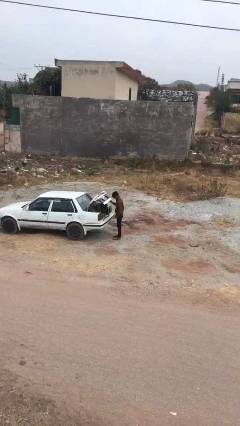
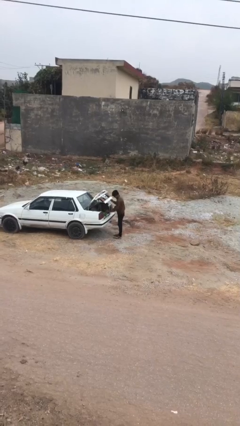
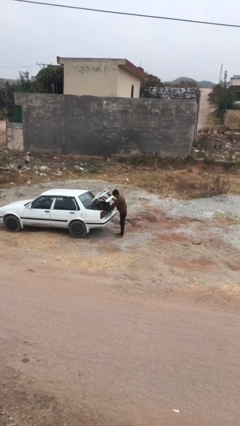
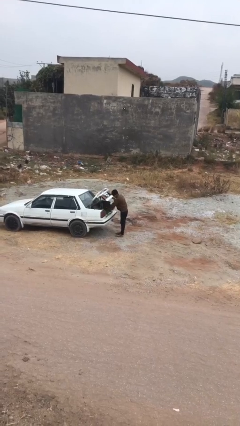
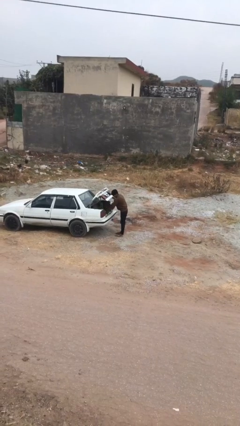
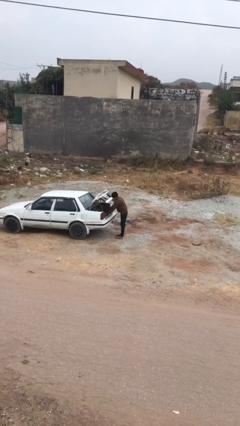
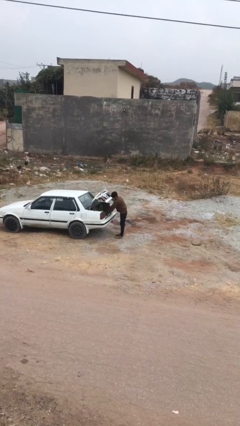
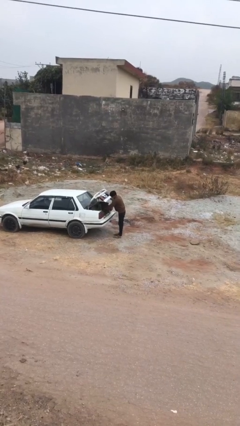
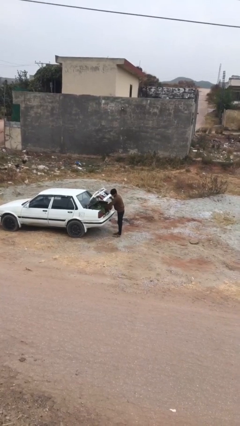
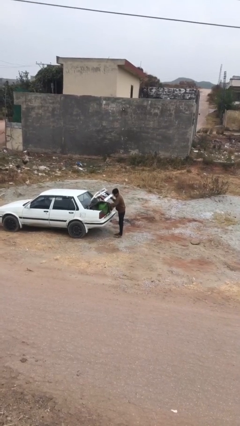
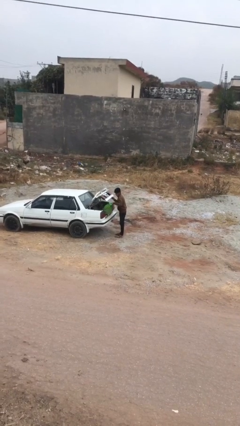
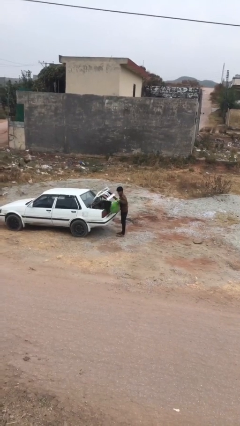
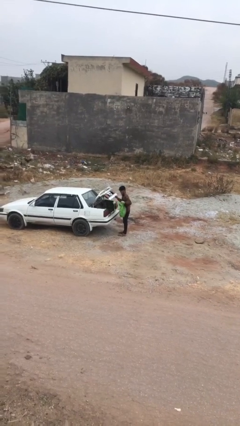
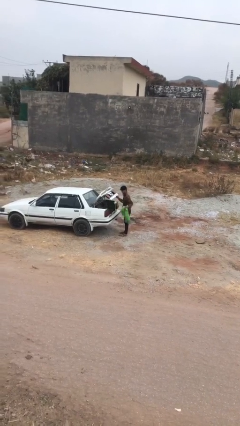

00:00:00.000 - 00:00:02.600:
person unloads car

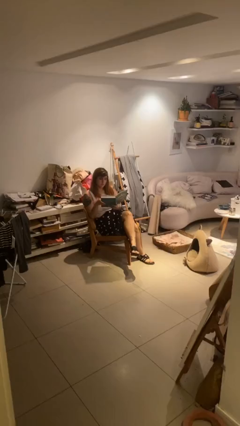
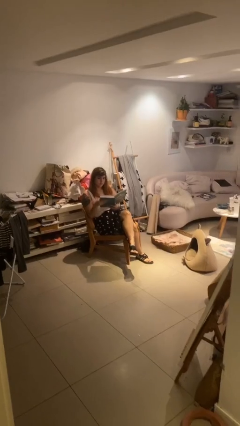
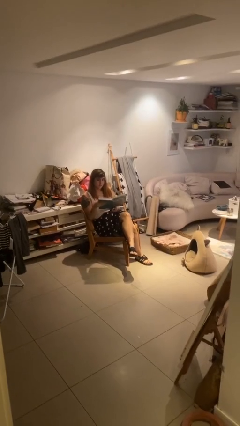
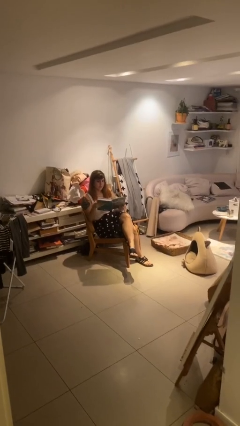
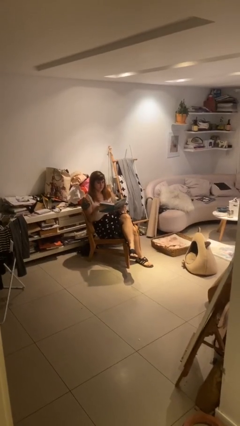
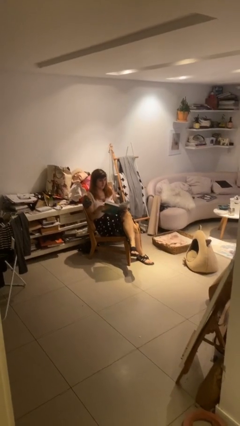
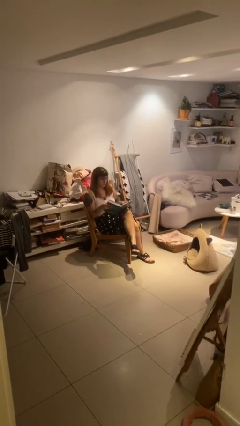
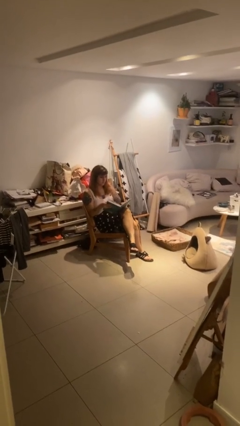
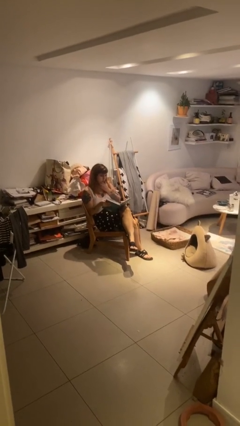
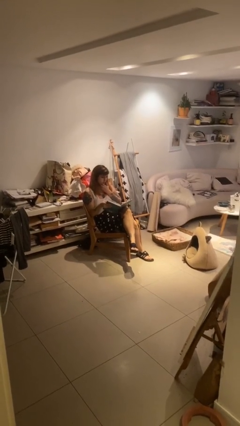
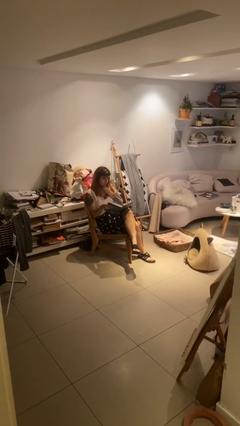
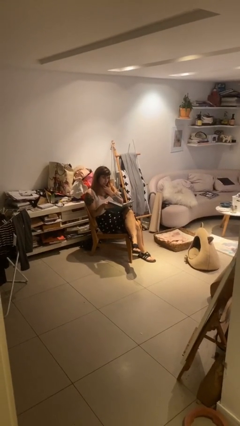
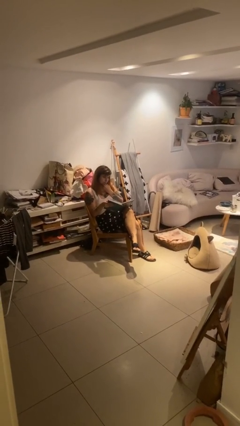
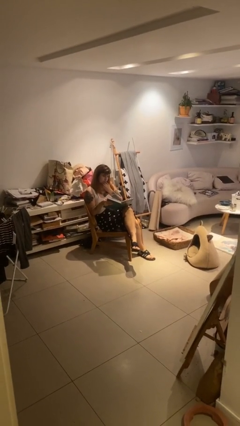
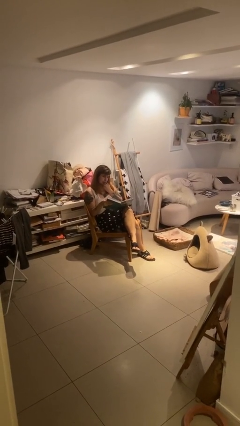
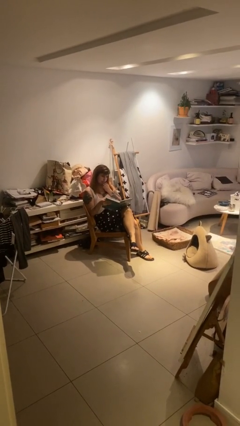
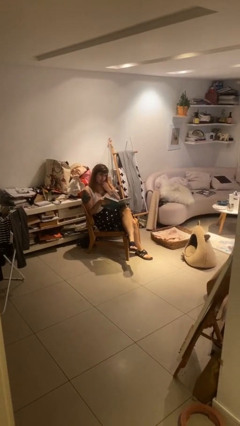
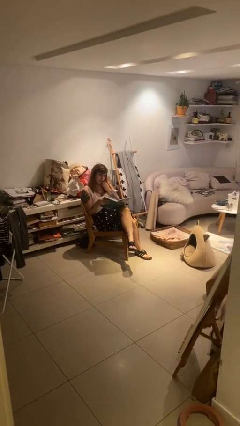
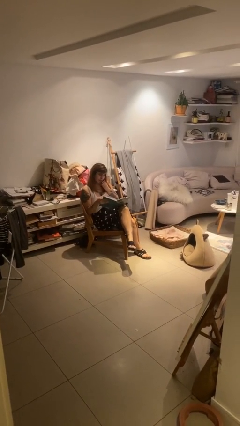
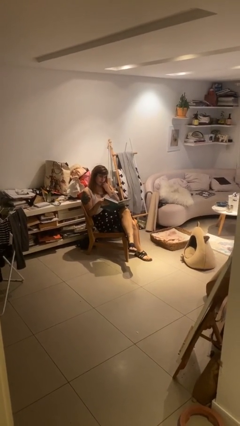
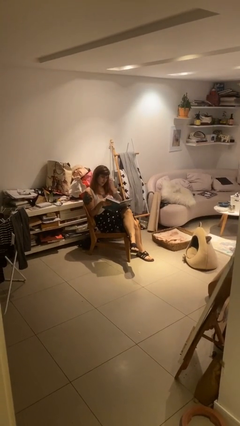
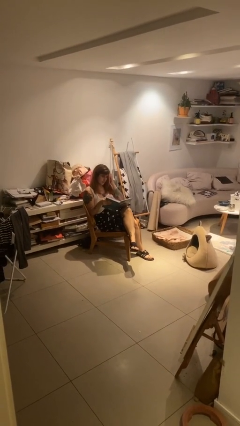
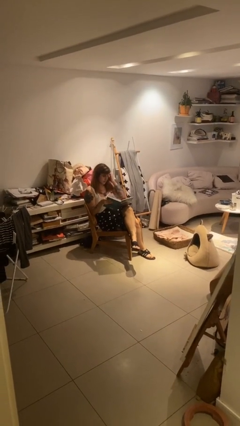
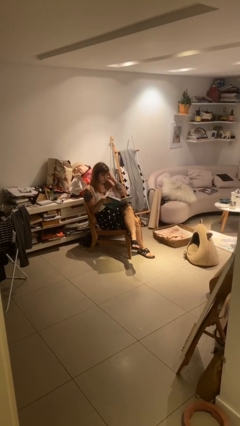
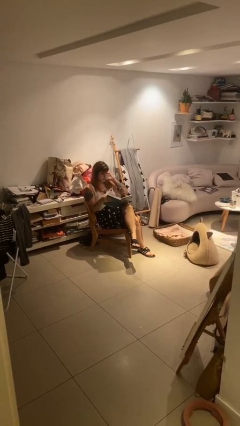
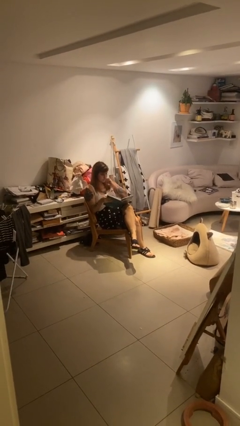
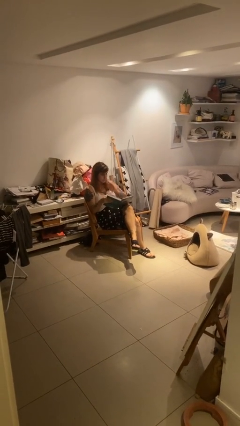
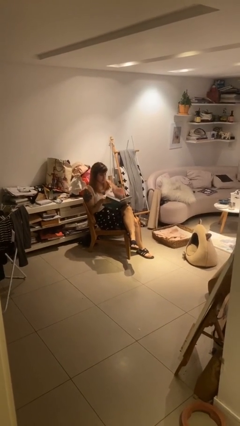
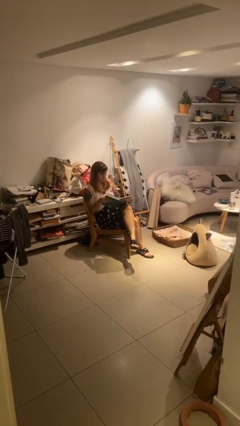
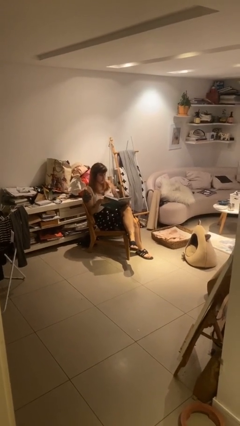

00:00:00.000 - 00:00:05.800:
person reads document

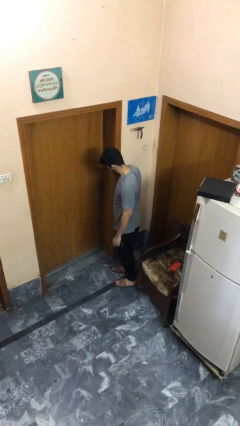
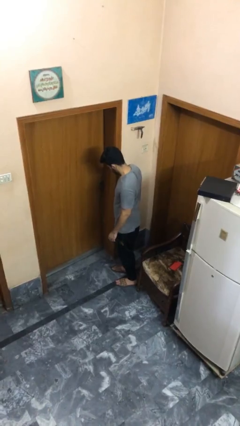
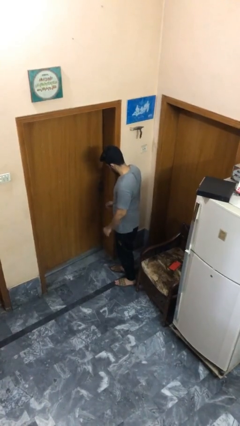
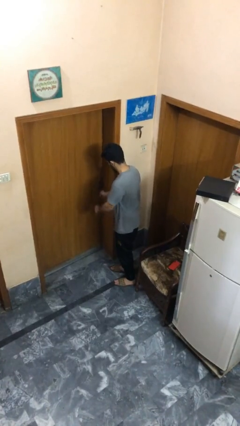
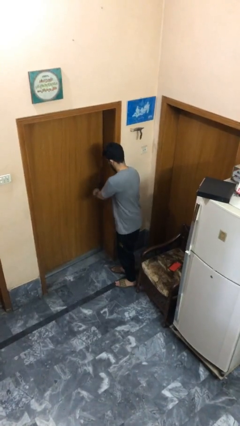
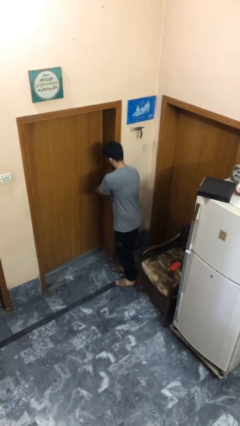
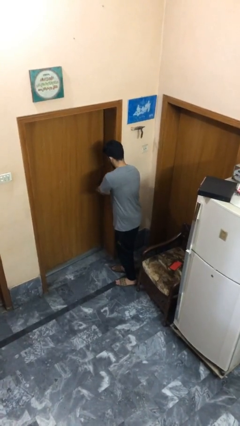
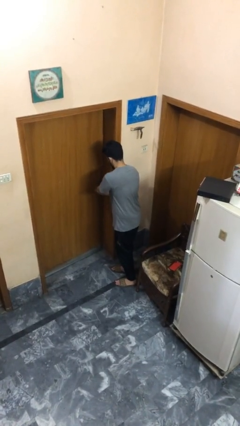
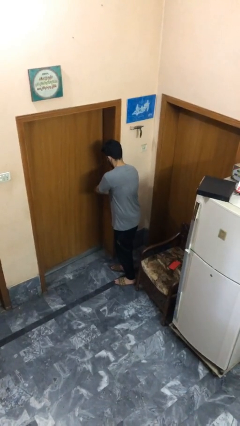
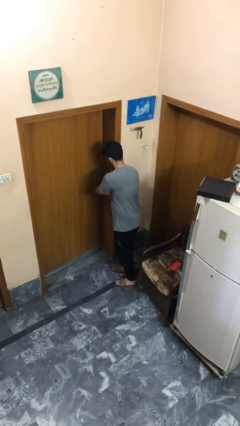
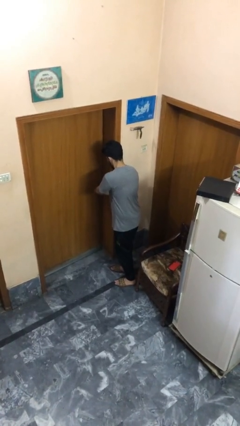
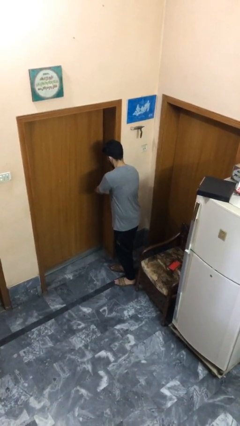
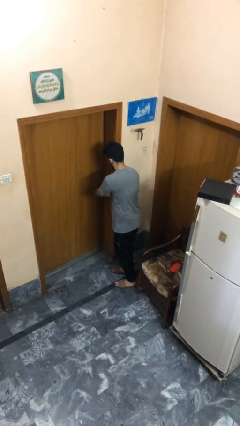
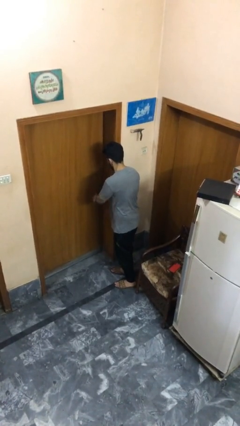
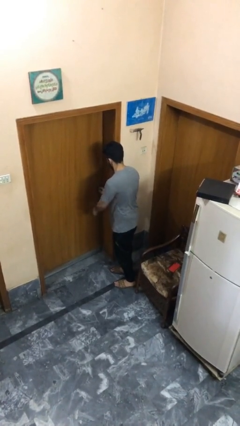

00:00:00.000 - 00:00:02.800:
person unlocks door with keys

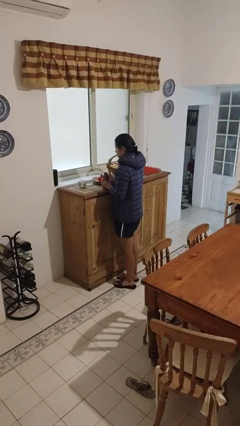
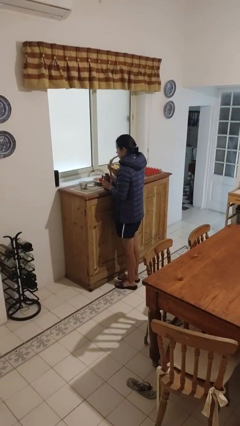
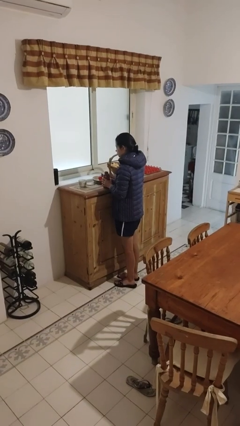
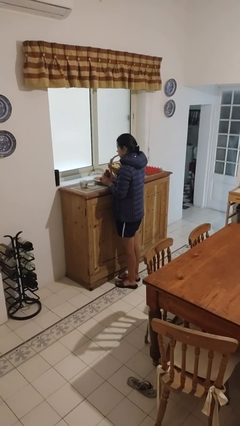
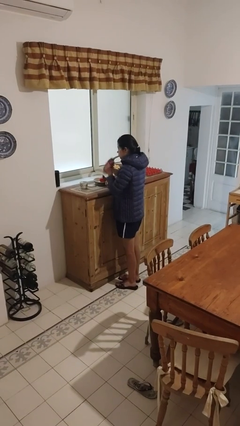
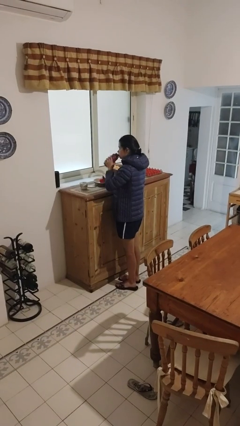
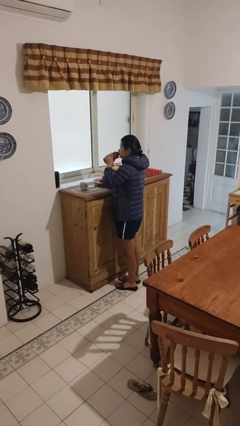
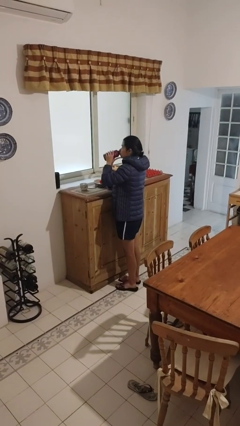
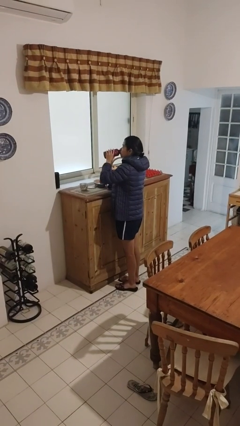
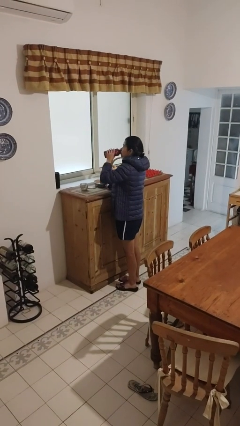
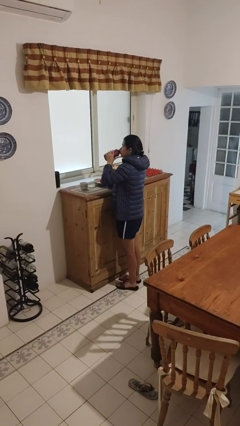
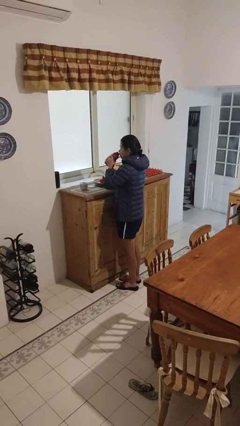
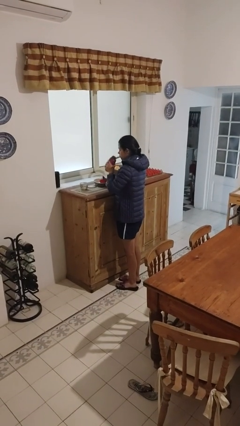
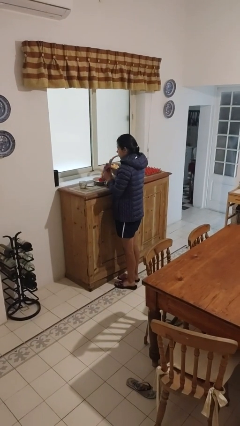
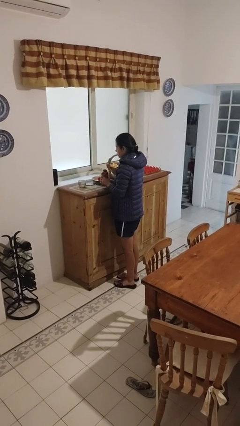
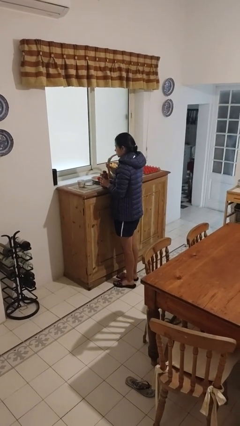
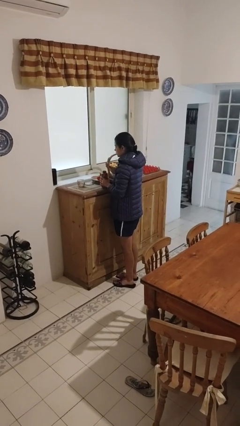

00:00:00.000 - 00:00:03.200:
person drinks from bottle

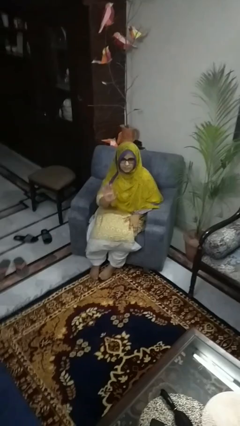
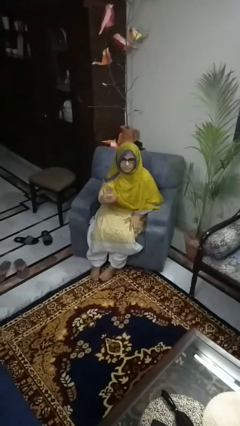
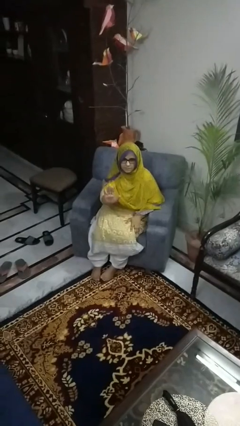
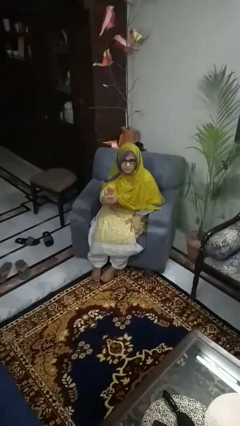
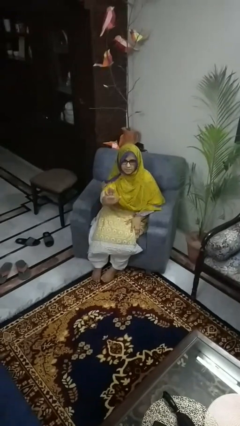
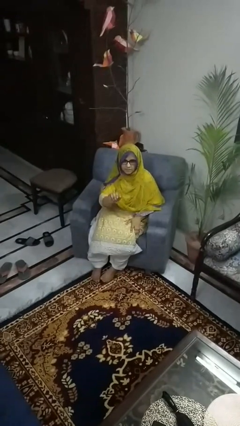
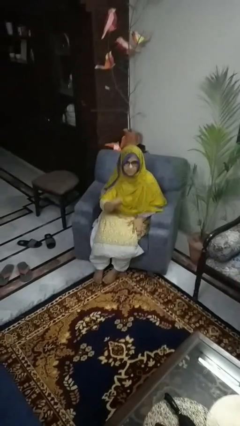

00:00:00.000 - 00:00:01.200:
person gestures stop

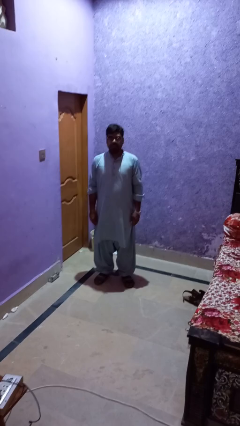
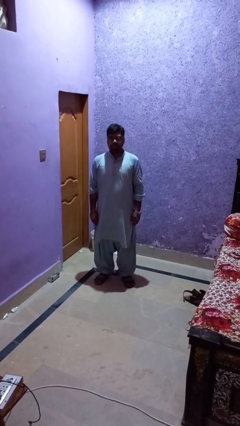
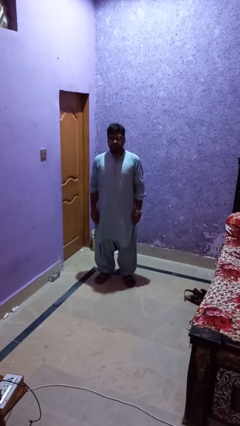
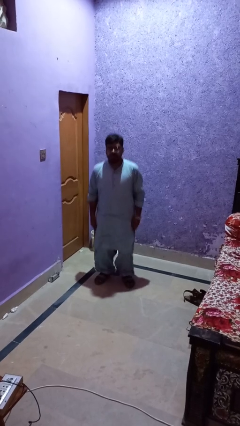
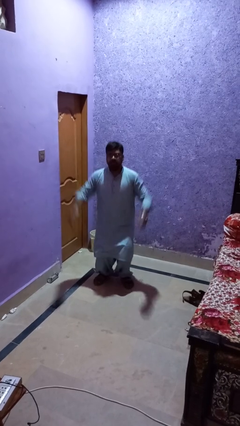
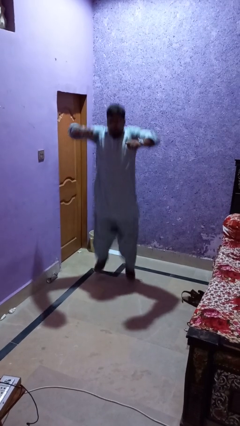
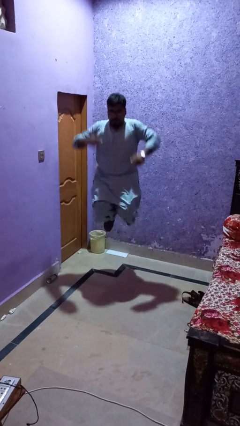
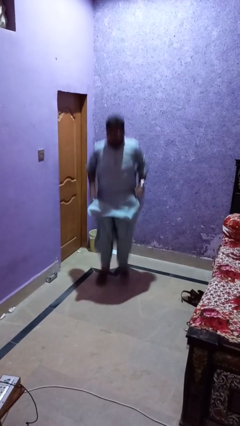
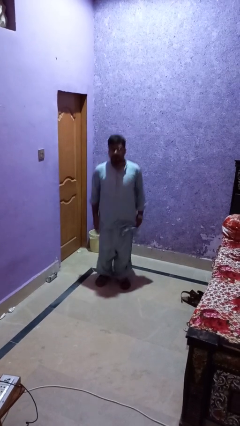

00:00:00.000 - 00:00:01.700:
person jumps
